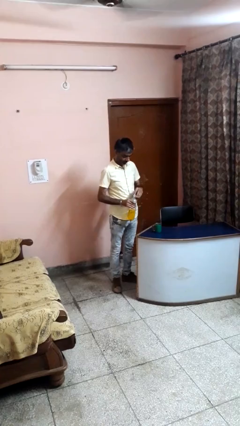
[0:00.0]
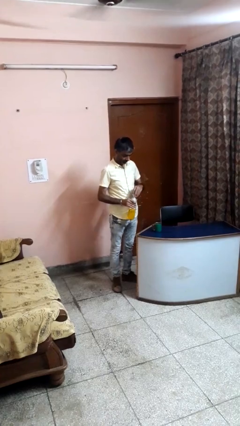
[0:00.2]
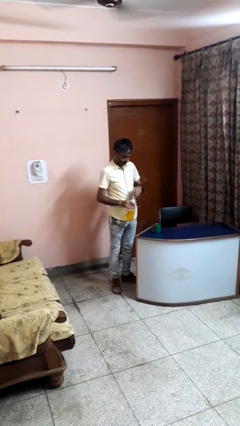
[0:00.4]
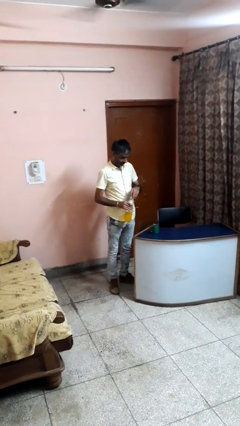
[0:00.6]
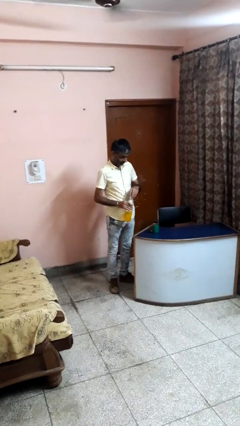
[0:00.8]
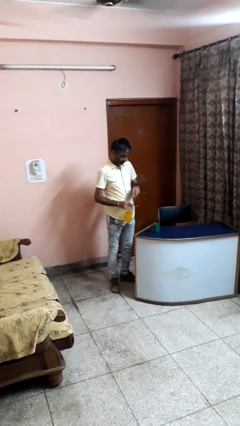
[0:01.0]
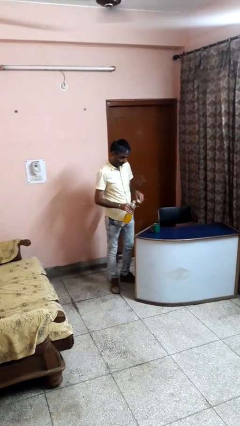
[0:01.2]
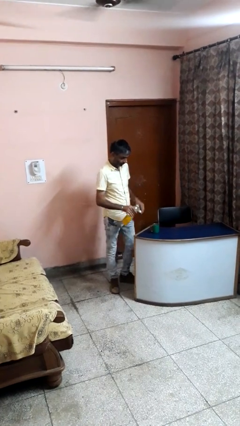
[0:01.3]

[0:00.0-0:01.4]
person unscrews lid from bottle

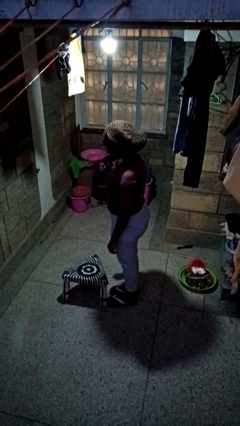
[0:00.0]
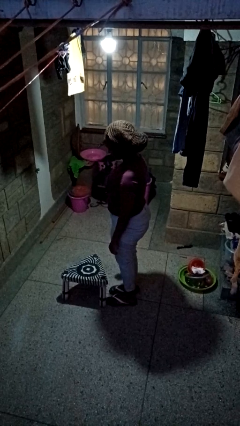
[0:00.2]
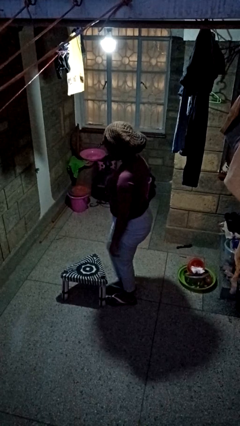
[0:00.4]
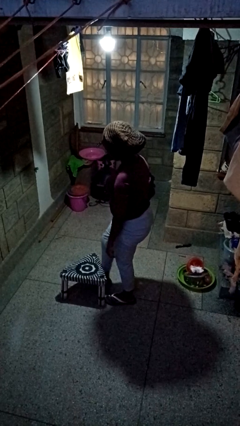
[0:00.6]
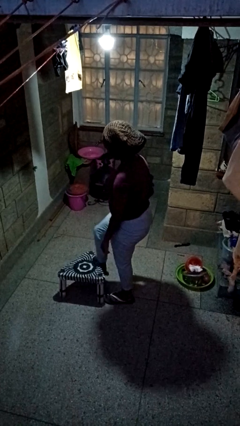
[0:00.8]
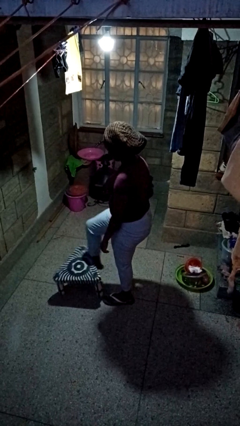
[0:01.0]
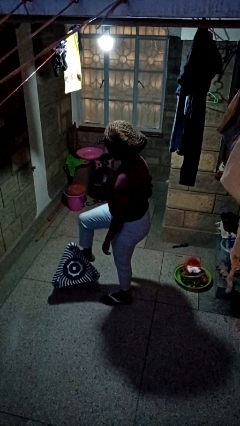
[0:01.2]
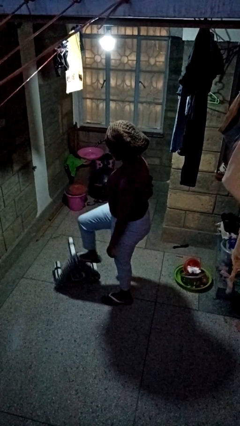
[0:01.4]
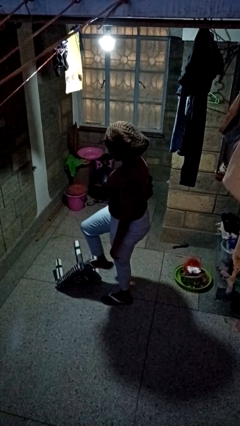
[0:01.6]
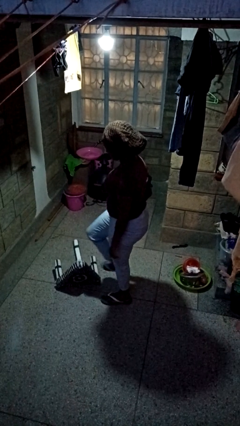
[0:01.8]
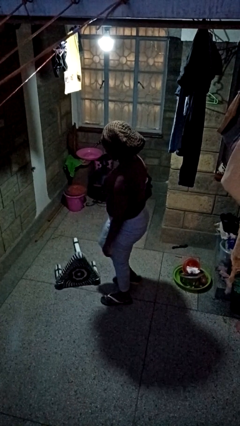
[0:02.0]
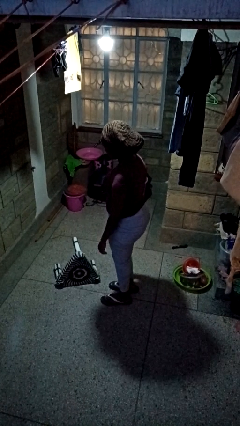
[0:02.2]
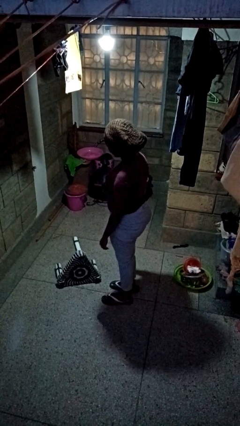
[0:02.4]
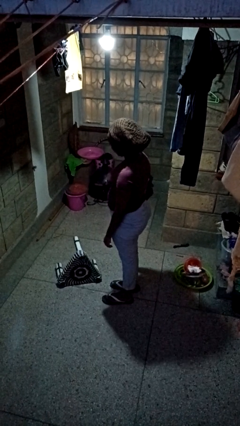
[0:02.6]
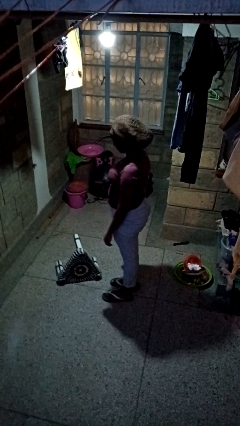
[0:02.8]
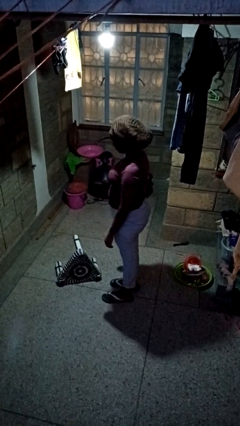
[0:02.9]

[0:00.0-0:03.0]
person knocks over furniture

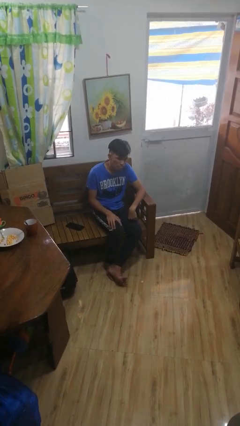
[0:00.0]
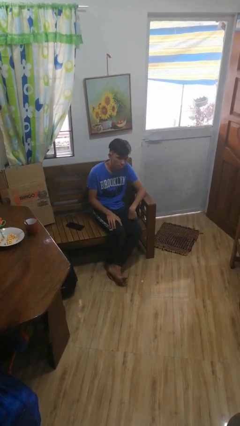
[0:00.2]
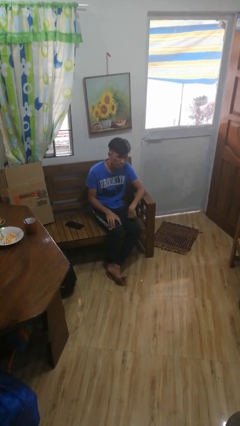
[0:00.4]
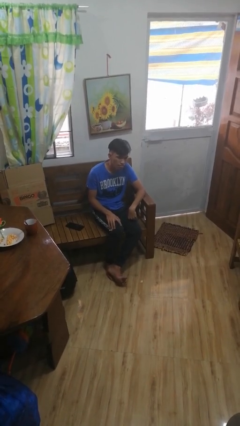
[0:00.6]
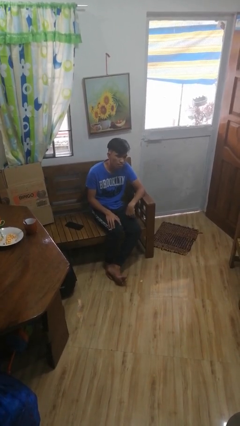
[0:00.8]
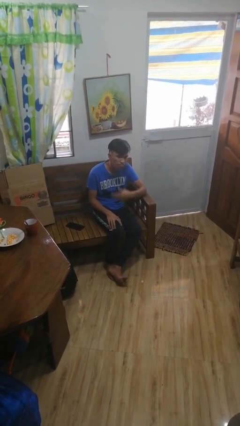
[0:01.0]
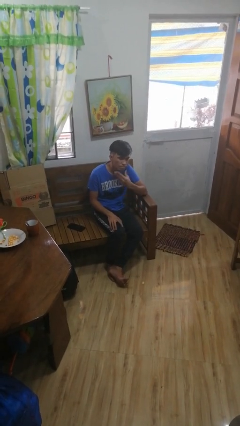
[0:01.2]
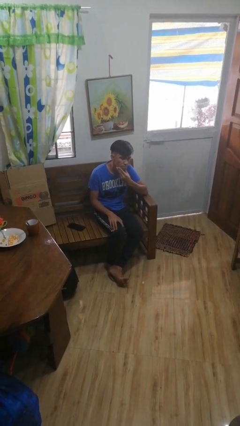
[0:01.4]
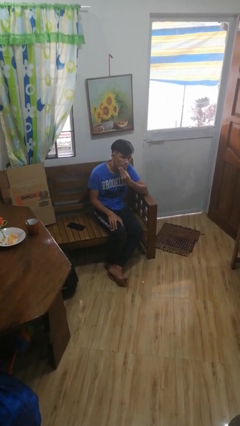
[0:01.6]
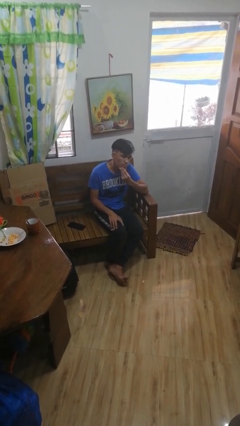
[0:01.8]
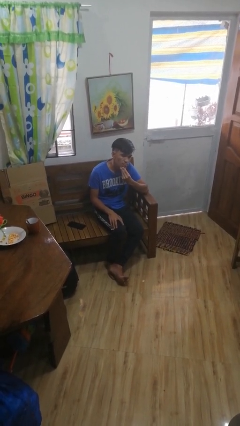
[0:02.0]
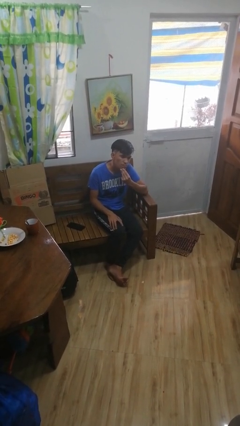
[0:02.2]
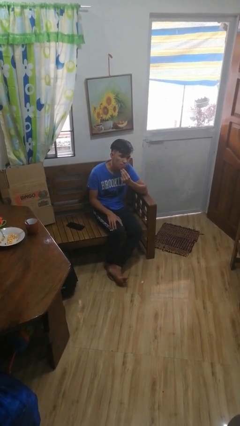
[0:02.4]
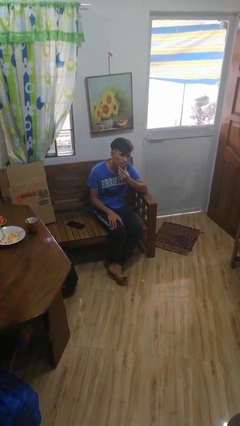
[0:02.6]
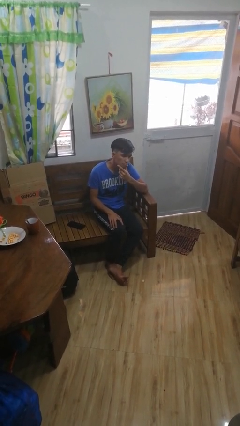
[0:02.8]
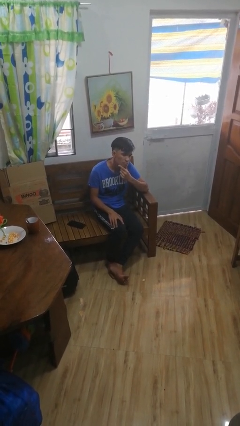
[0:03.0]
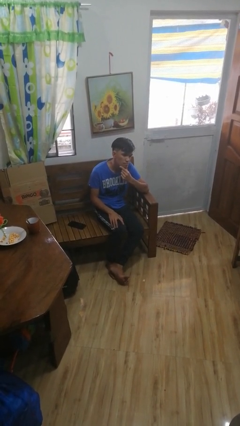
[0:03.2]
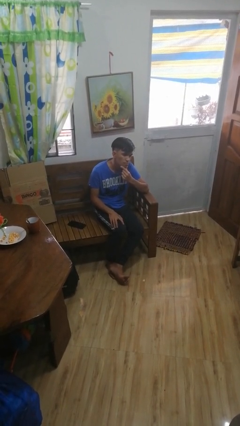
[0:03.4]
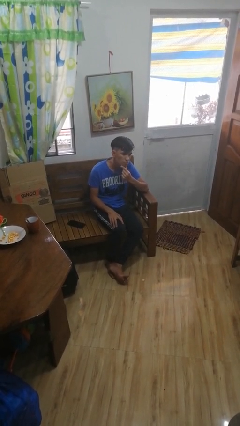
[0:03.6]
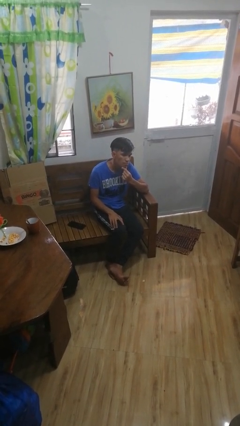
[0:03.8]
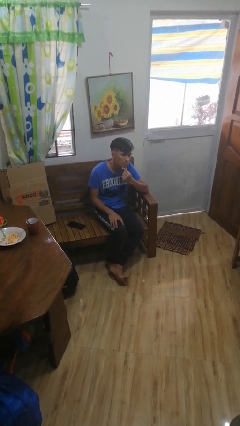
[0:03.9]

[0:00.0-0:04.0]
person strokes chin

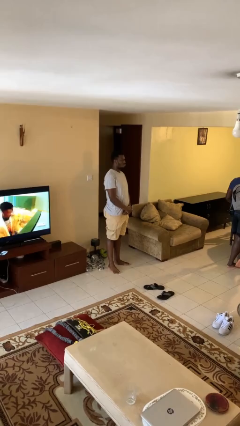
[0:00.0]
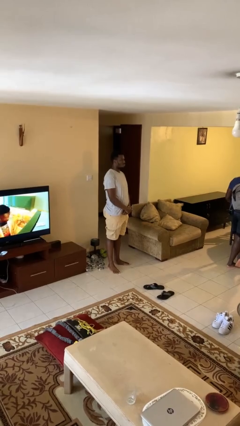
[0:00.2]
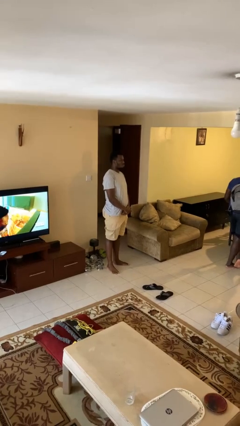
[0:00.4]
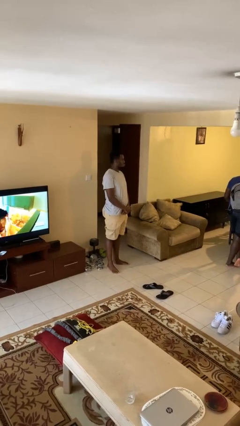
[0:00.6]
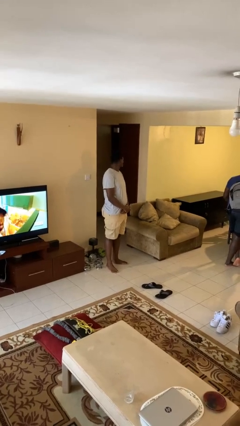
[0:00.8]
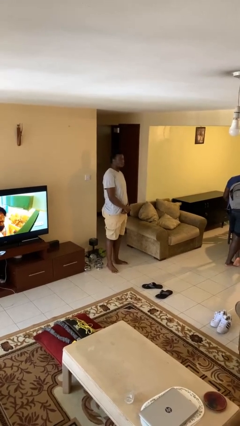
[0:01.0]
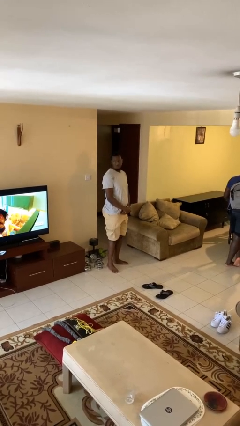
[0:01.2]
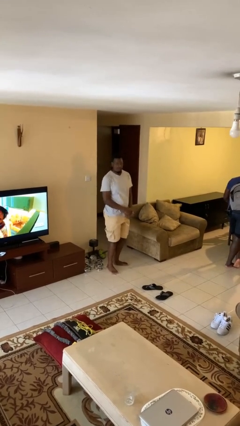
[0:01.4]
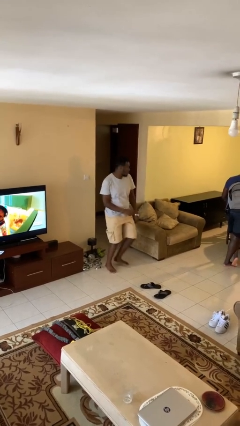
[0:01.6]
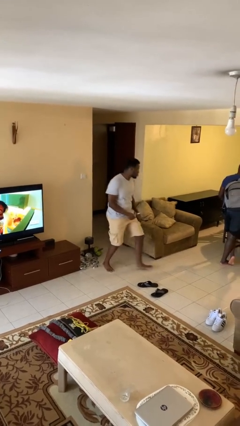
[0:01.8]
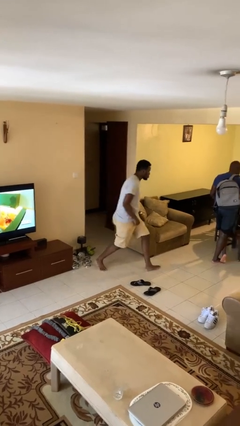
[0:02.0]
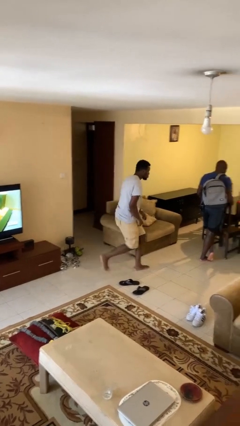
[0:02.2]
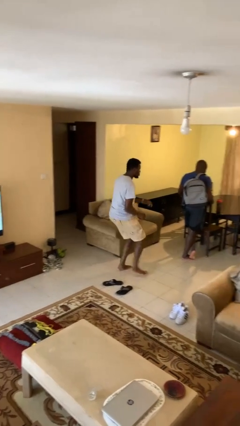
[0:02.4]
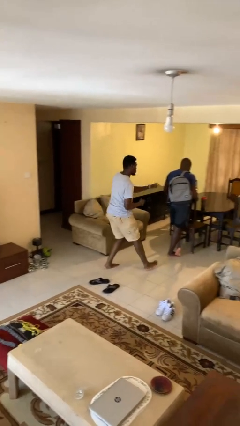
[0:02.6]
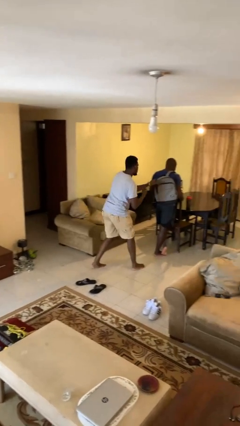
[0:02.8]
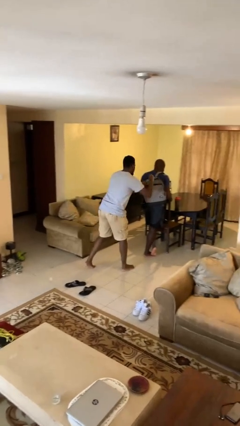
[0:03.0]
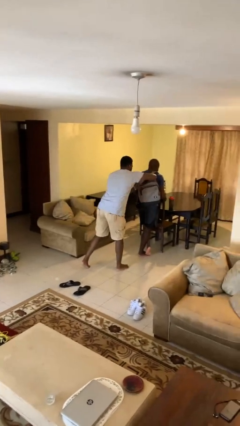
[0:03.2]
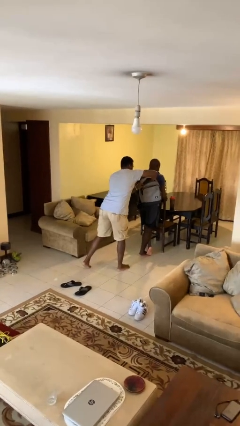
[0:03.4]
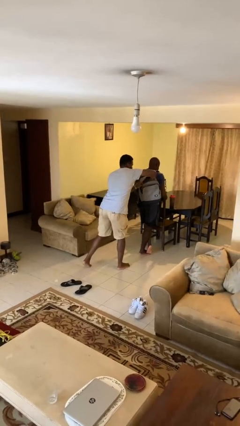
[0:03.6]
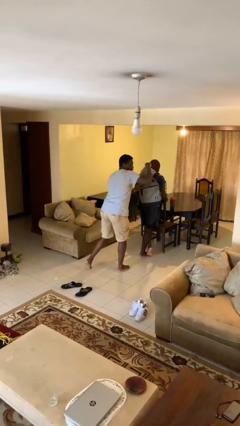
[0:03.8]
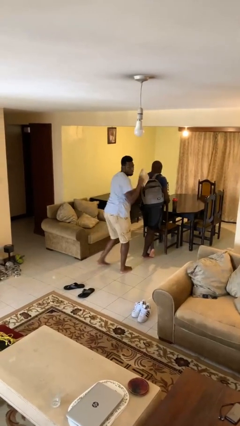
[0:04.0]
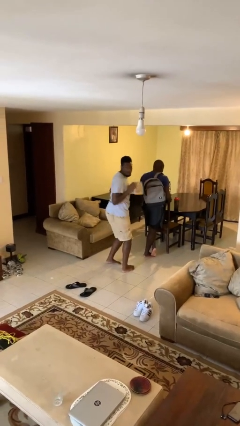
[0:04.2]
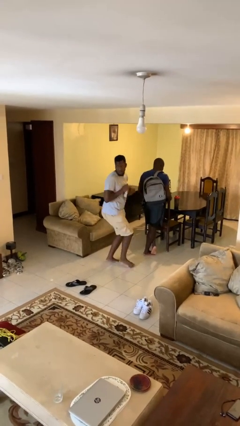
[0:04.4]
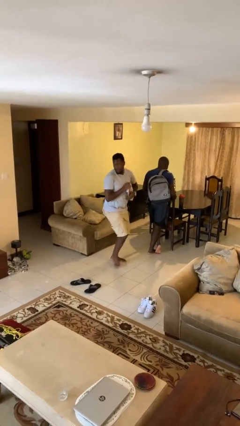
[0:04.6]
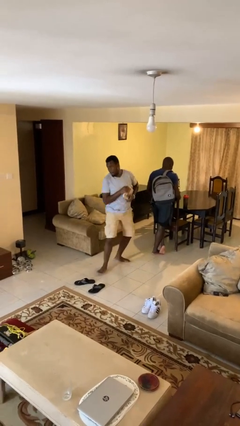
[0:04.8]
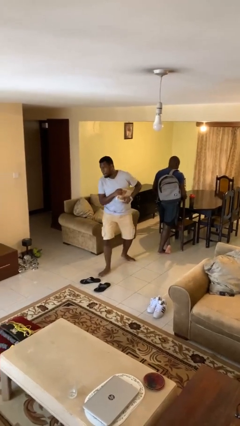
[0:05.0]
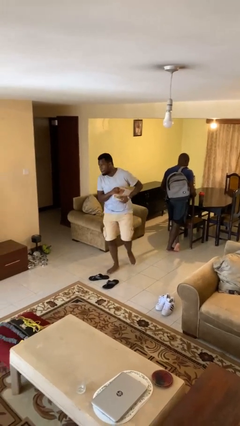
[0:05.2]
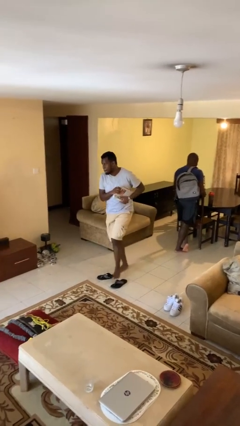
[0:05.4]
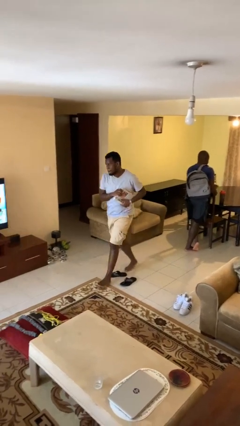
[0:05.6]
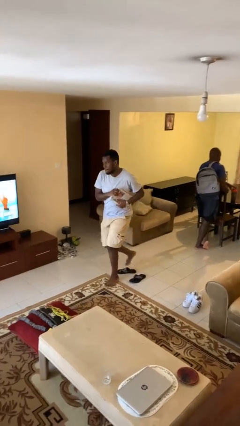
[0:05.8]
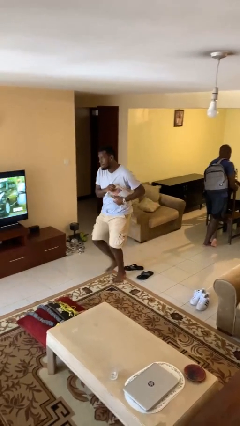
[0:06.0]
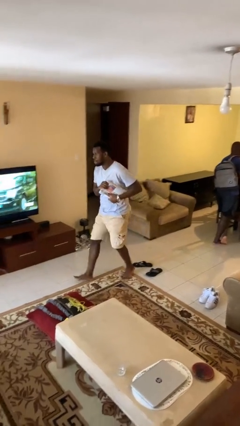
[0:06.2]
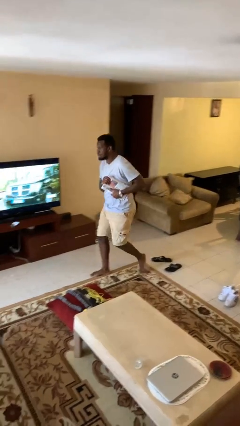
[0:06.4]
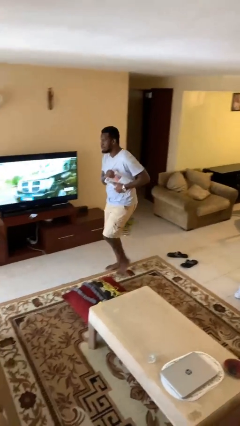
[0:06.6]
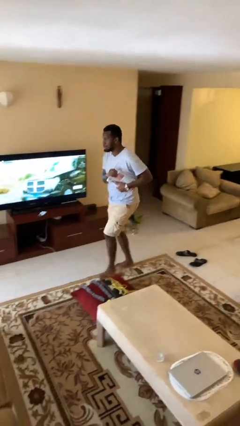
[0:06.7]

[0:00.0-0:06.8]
person steals object from person

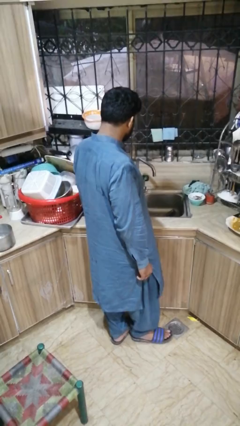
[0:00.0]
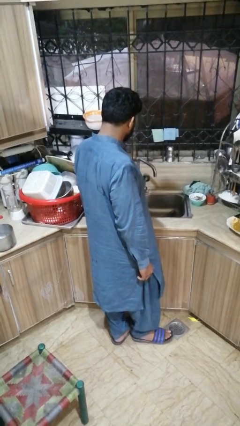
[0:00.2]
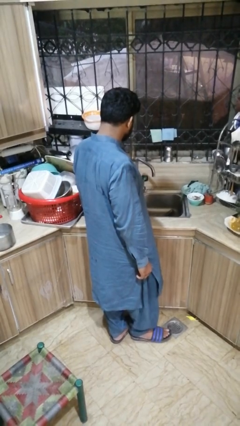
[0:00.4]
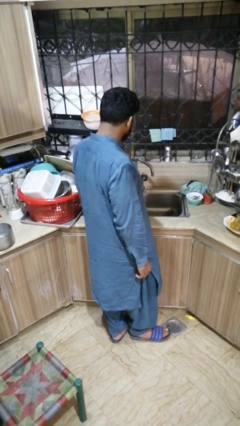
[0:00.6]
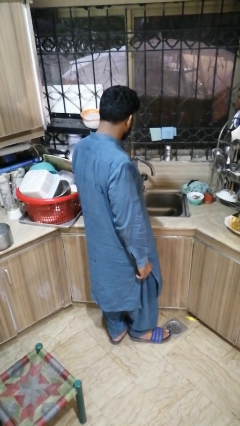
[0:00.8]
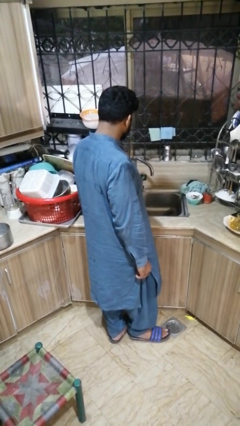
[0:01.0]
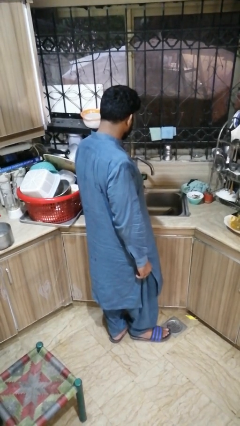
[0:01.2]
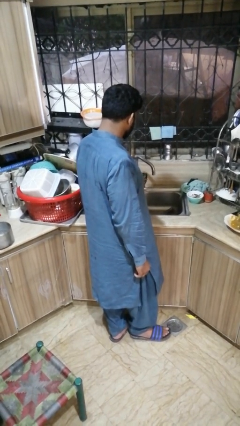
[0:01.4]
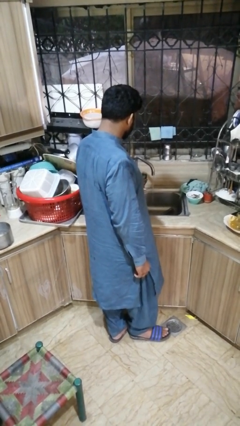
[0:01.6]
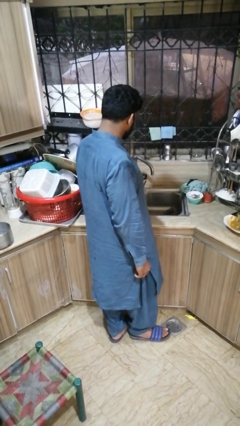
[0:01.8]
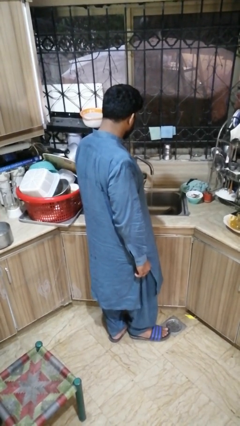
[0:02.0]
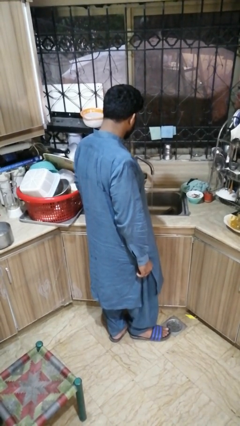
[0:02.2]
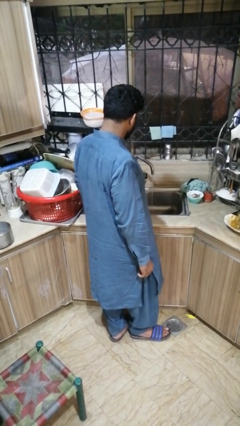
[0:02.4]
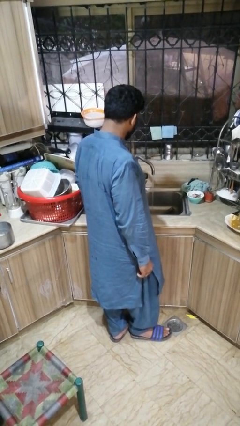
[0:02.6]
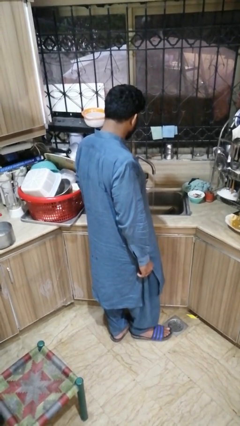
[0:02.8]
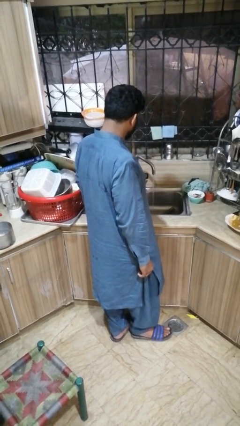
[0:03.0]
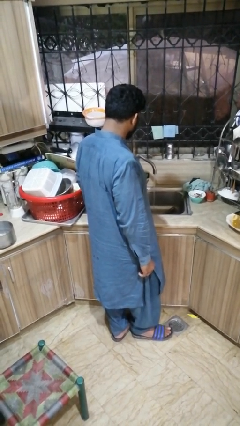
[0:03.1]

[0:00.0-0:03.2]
person turns on faucet
